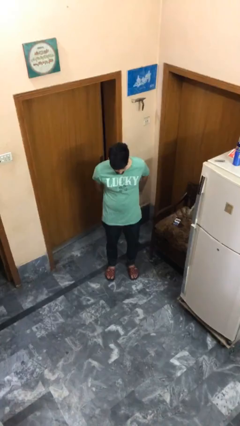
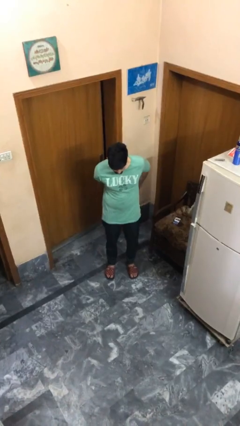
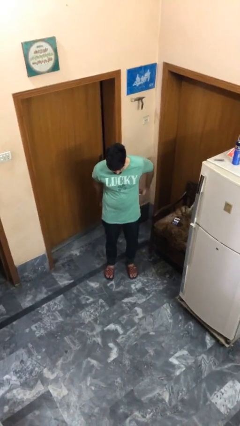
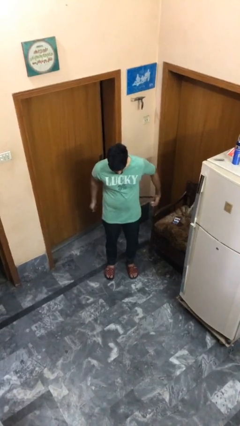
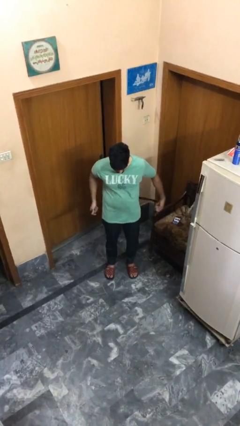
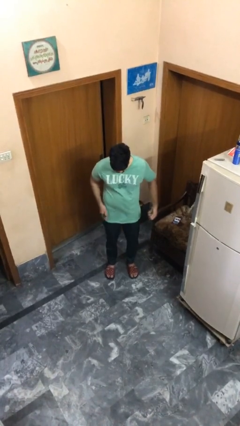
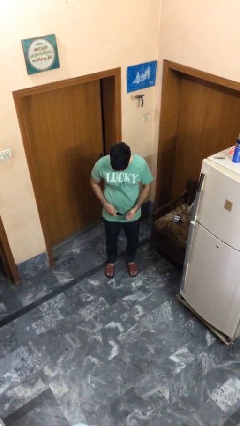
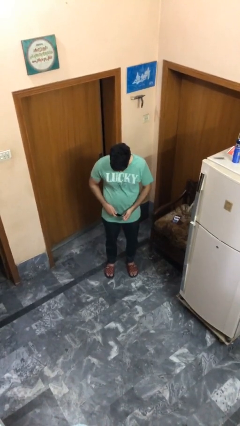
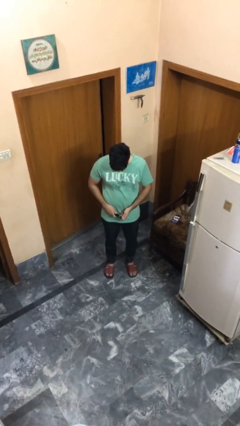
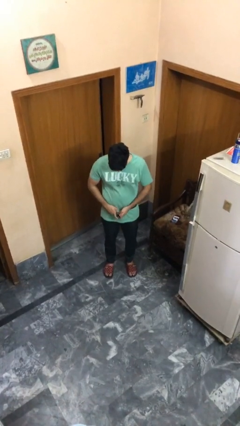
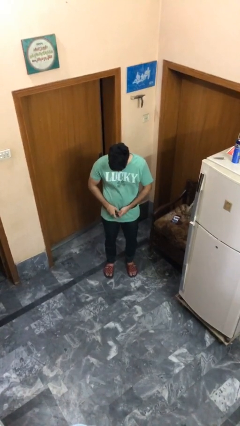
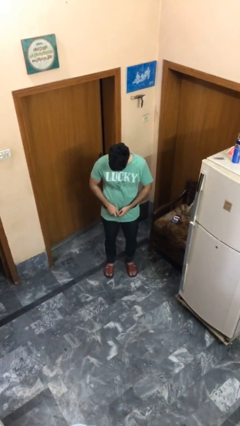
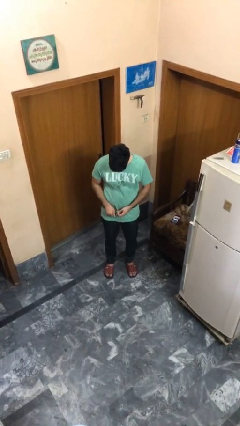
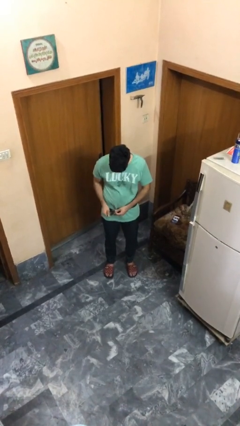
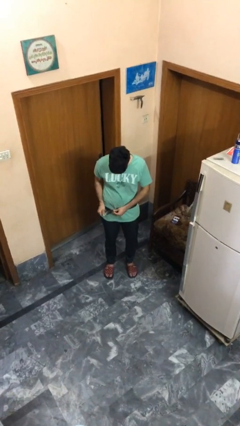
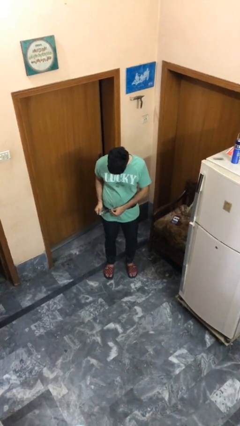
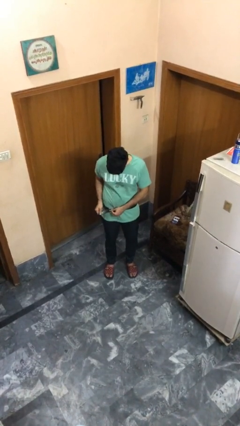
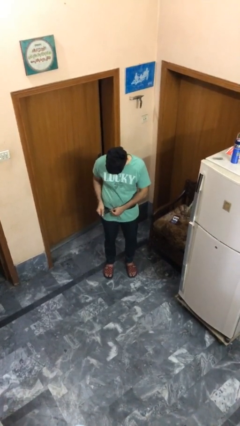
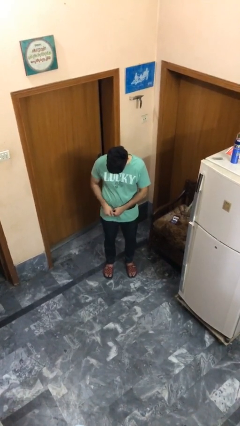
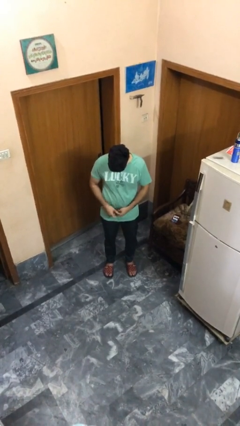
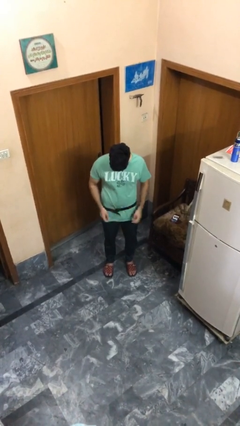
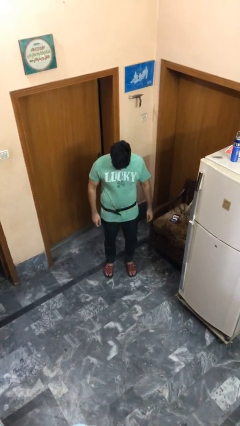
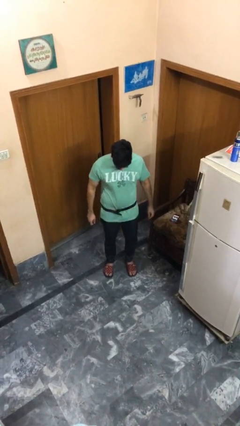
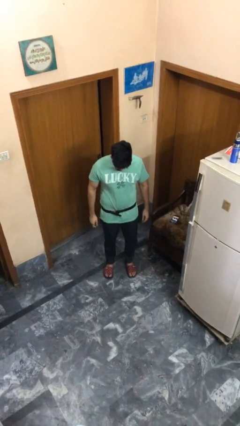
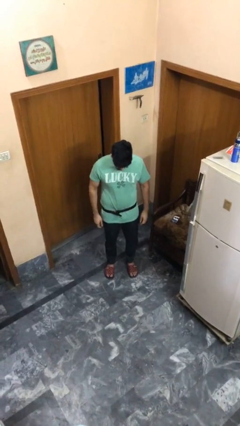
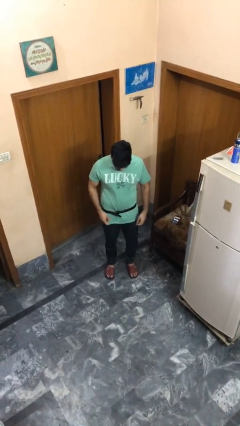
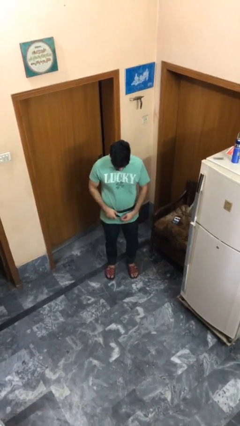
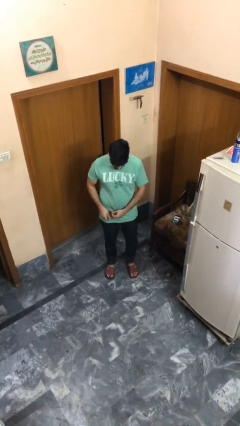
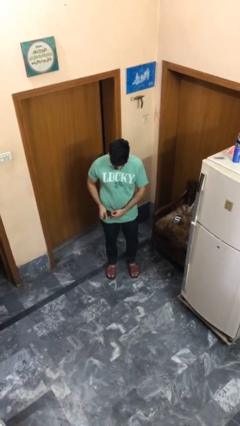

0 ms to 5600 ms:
person puts on belt

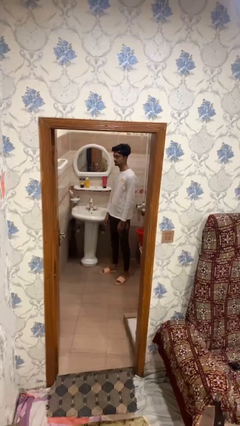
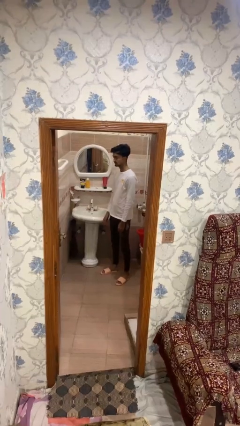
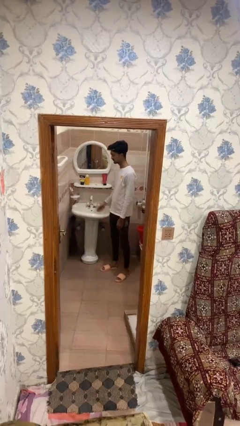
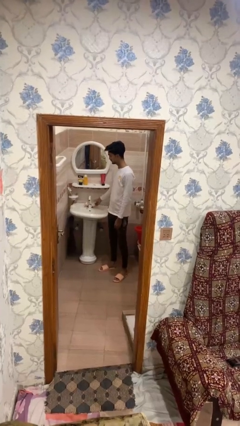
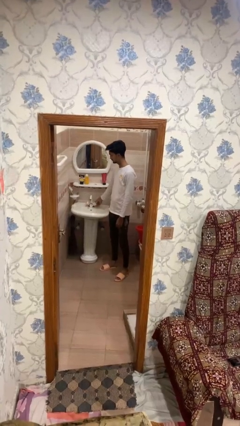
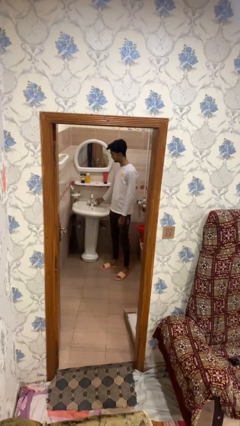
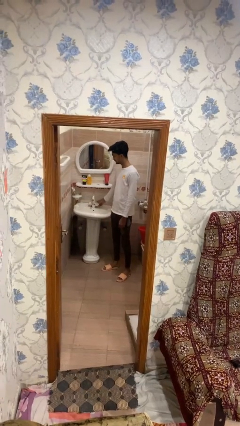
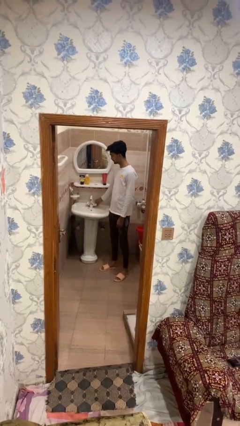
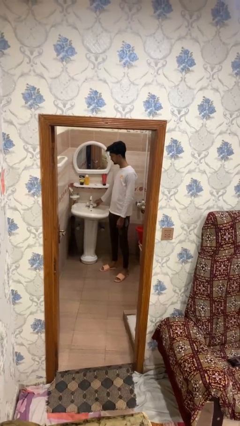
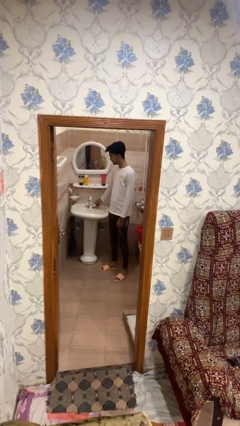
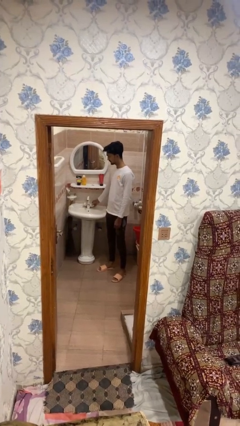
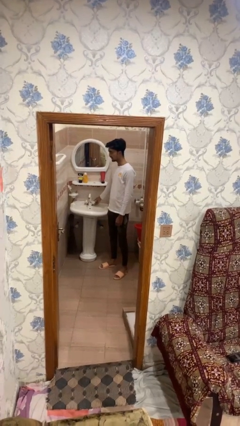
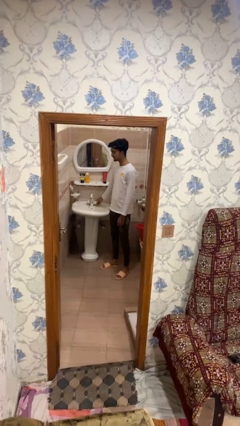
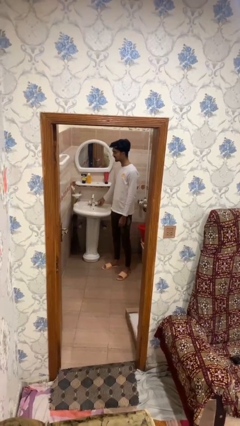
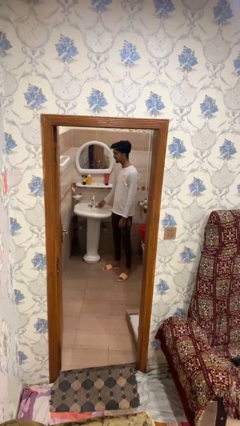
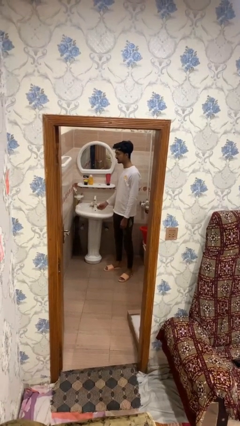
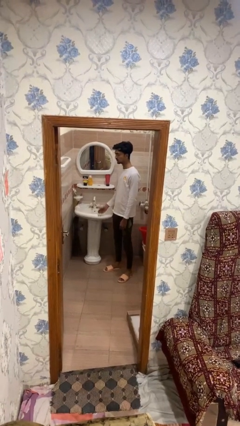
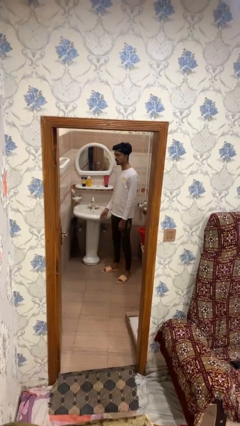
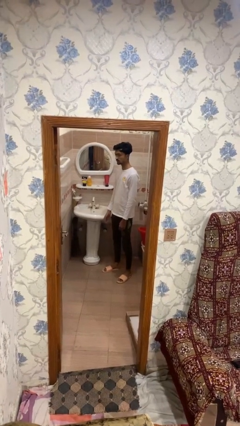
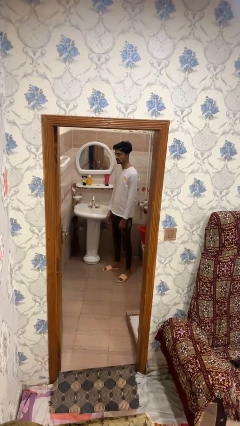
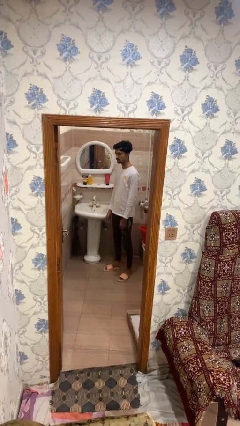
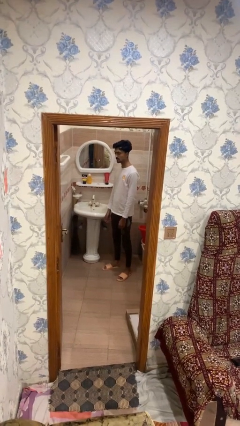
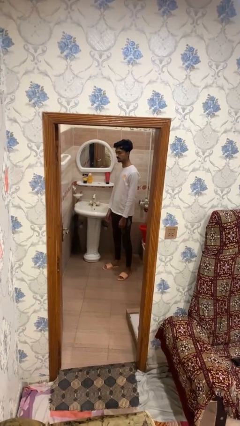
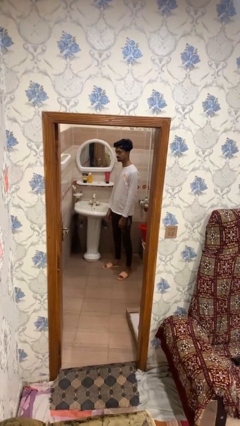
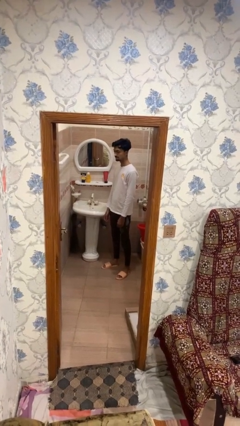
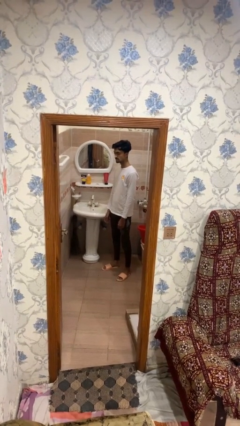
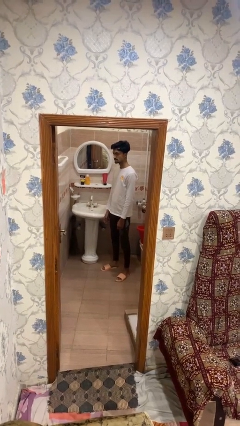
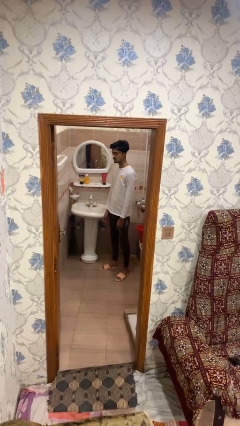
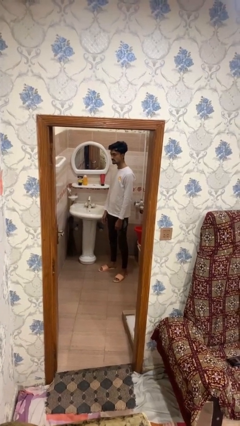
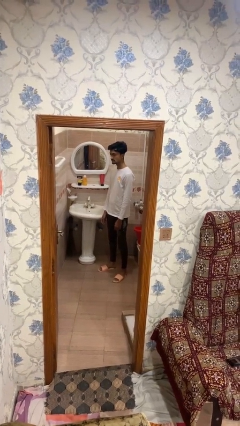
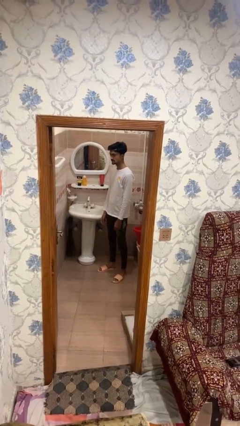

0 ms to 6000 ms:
person turns on faucet

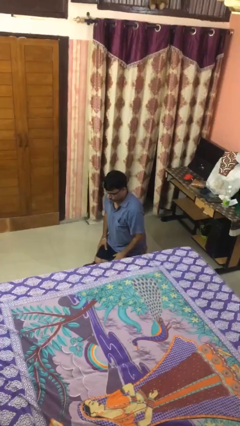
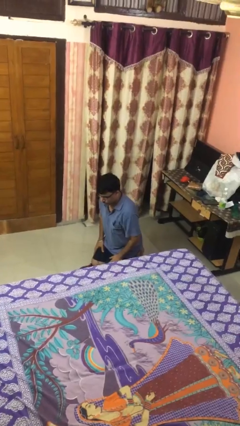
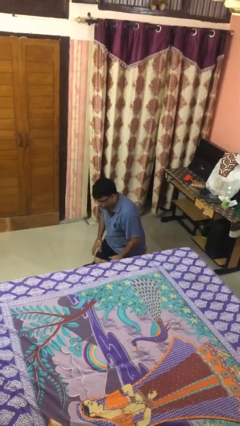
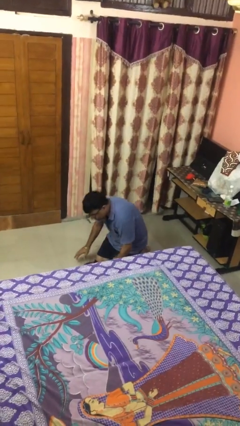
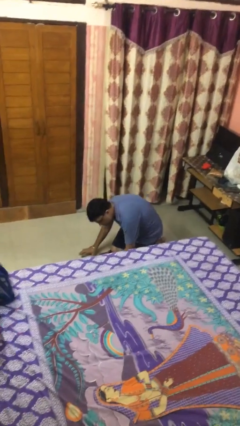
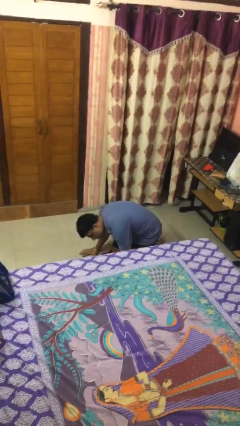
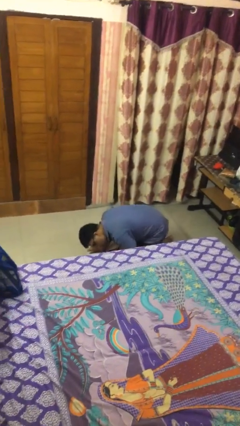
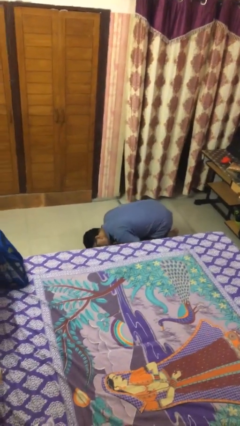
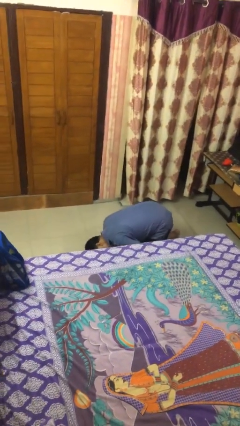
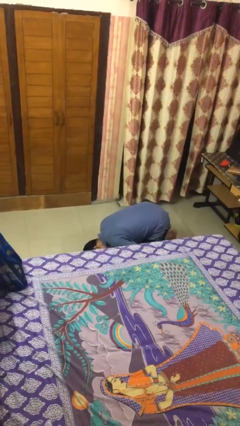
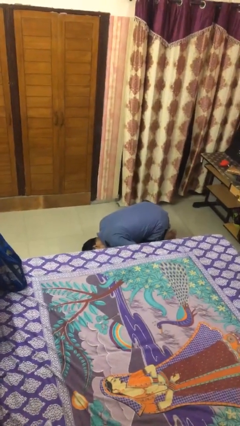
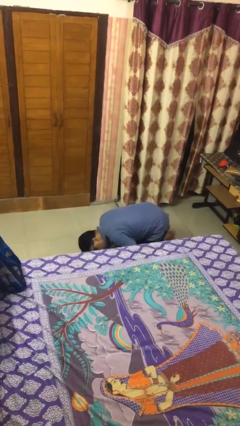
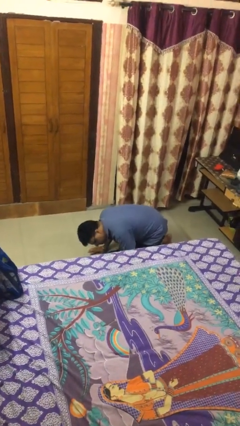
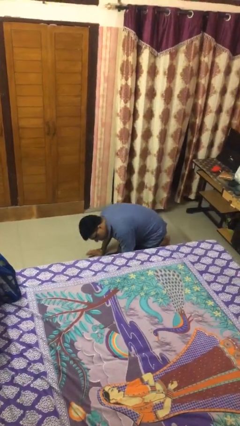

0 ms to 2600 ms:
person searches under bed

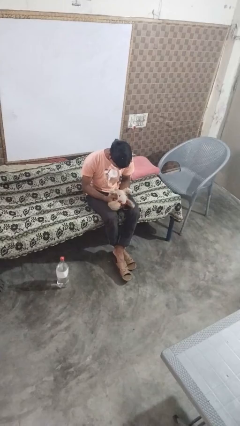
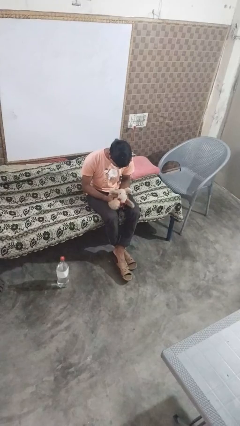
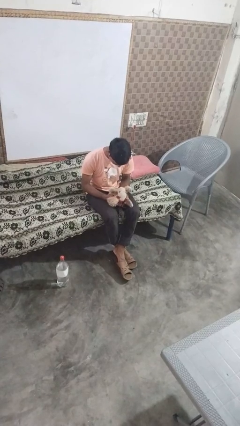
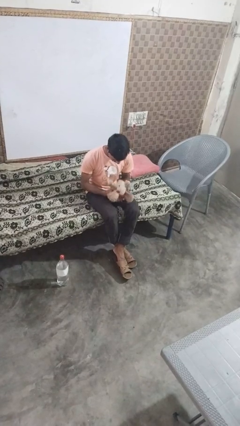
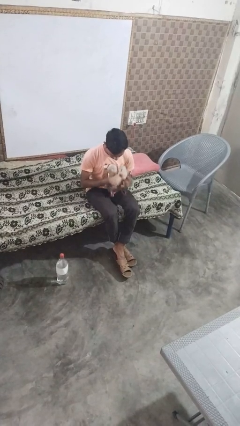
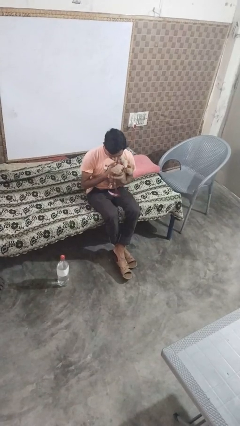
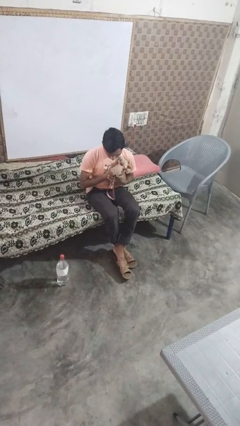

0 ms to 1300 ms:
person hugs stuffed animal

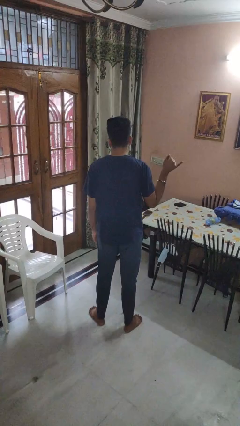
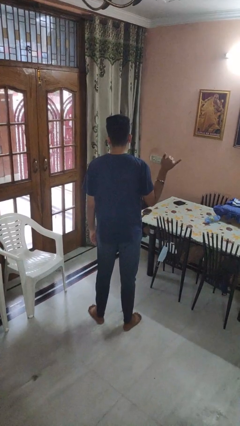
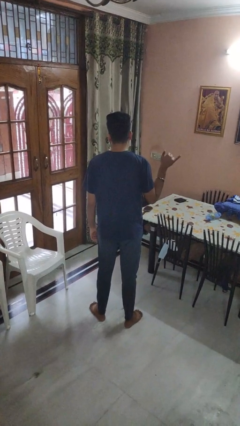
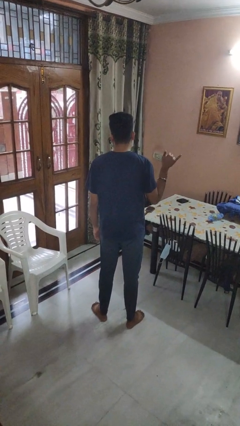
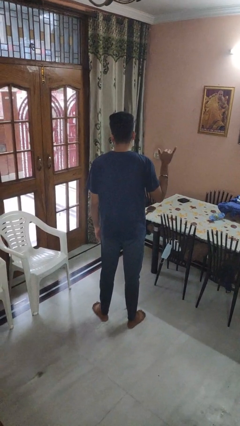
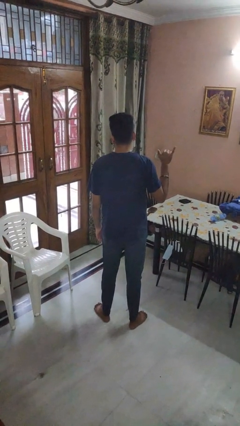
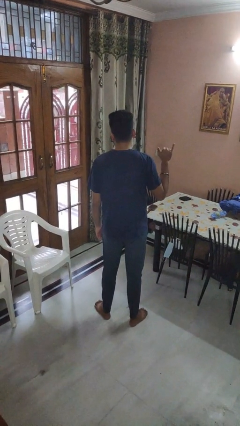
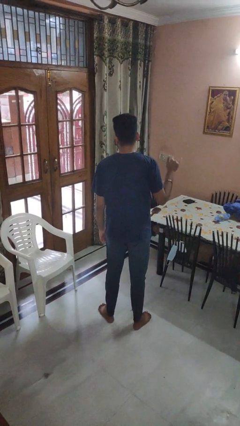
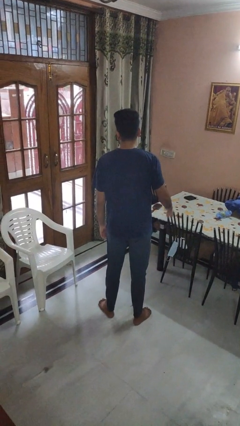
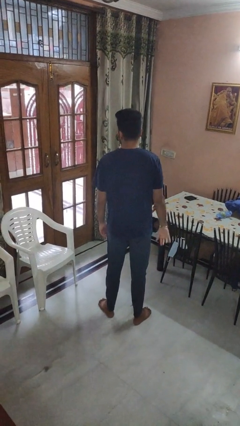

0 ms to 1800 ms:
person gestures hang loose

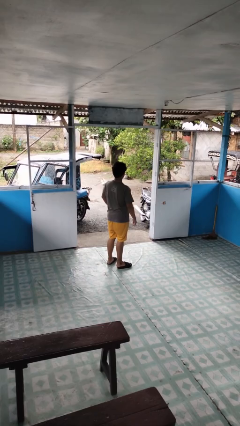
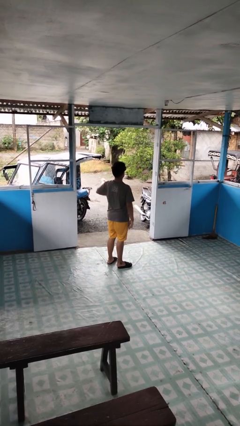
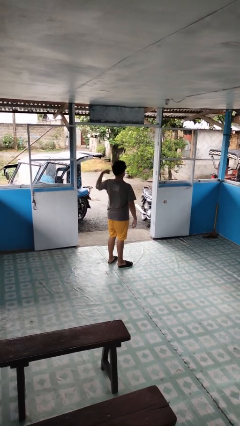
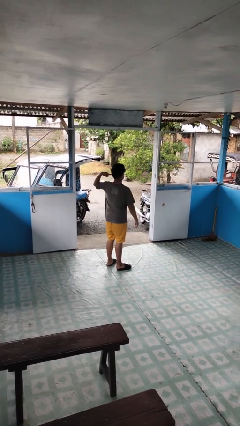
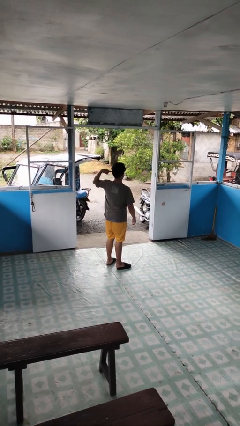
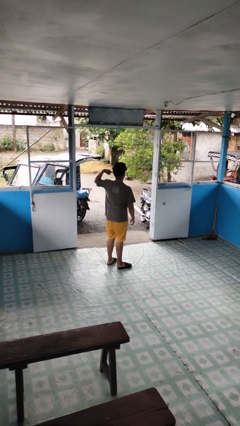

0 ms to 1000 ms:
person gestures listen closely
